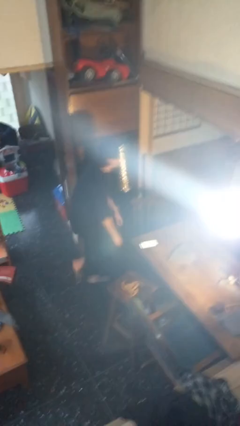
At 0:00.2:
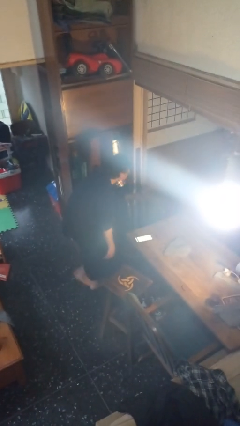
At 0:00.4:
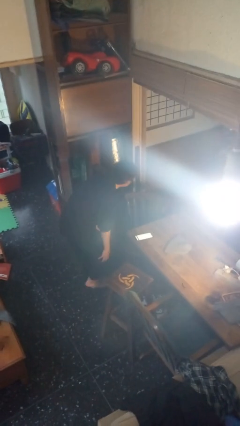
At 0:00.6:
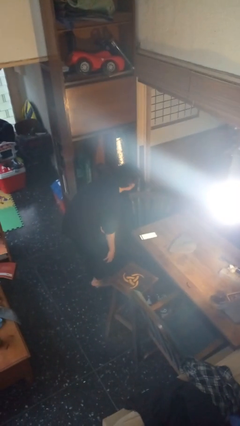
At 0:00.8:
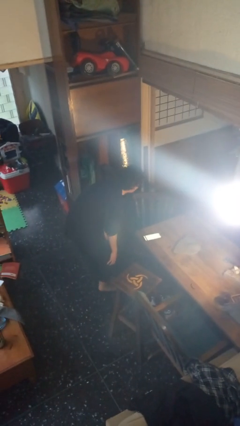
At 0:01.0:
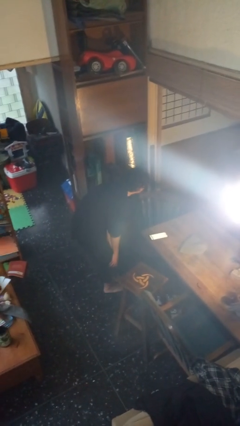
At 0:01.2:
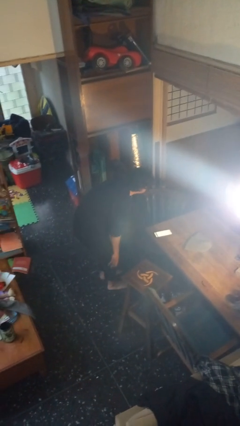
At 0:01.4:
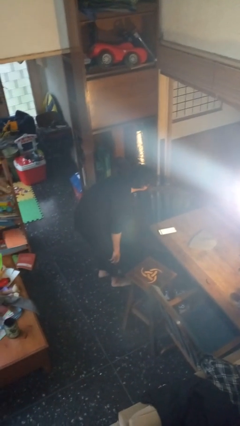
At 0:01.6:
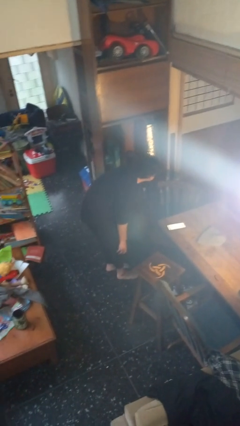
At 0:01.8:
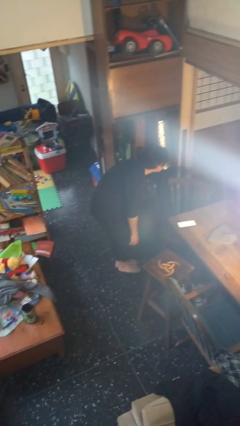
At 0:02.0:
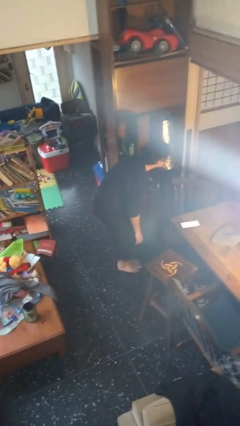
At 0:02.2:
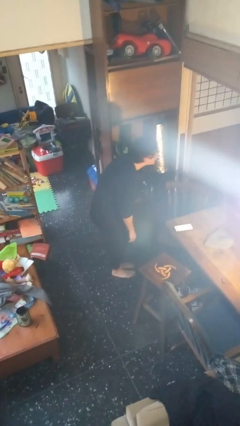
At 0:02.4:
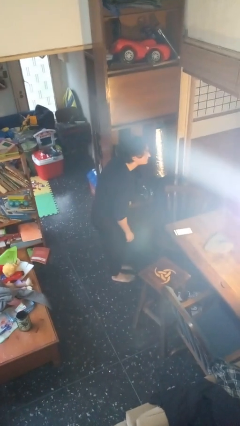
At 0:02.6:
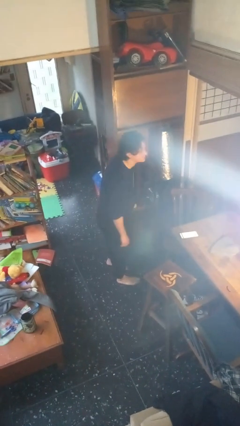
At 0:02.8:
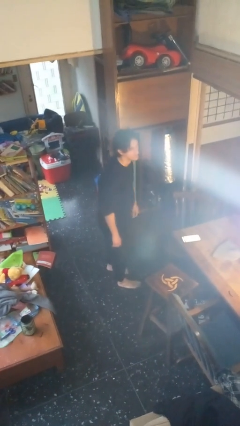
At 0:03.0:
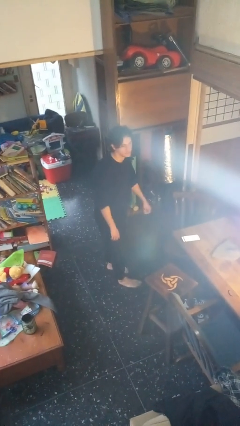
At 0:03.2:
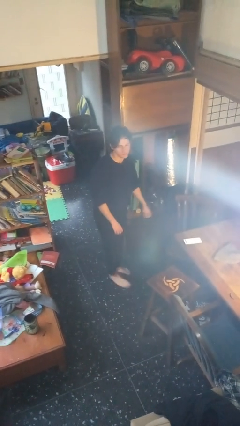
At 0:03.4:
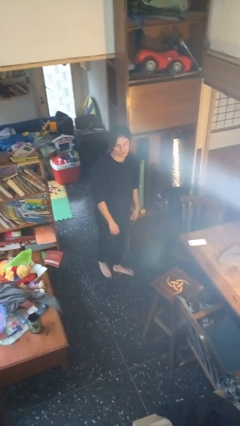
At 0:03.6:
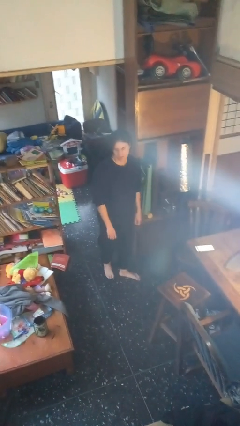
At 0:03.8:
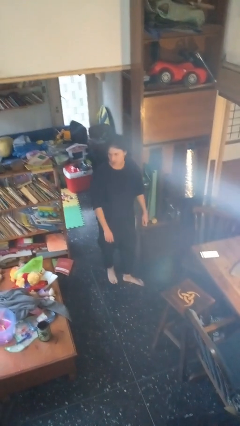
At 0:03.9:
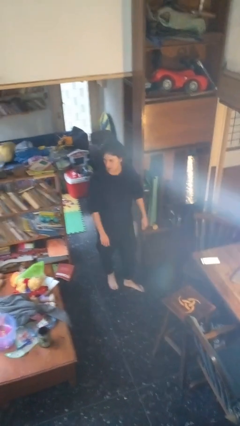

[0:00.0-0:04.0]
person stubs toe

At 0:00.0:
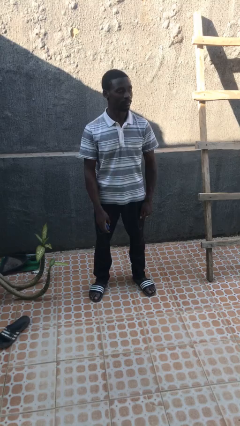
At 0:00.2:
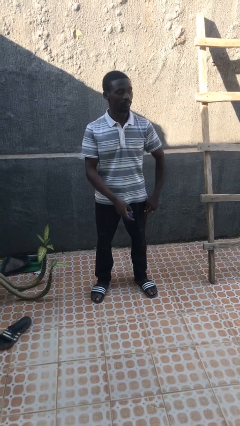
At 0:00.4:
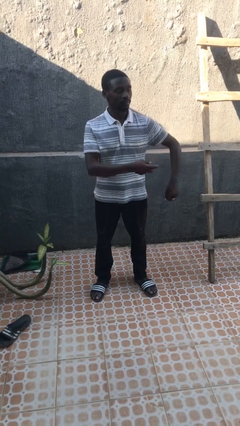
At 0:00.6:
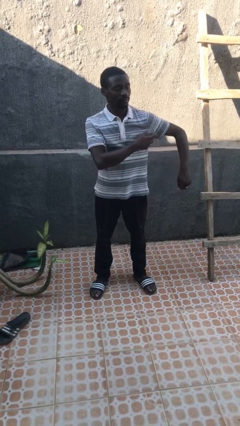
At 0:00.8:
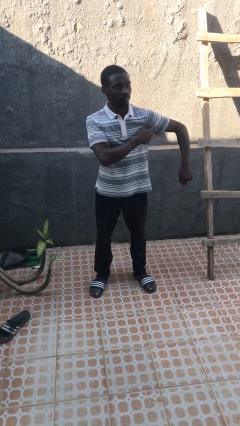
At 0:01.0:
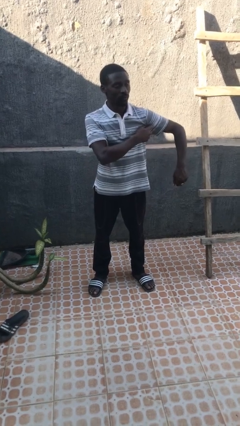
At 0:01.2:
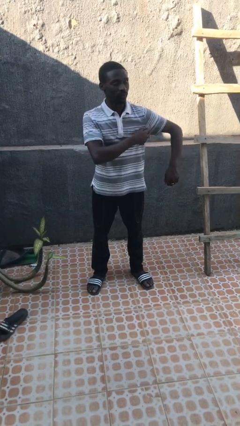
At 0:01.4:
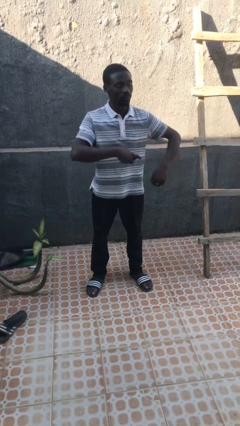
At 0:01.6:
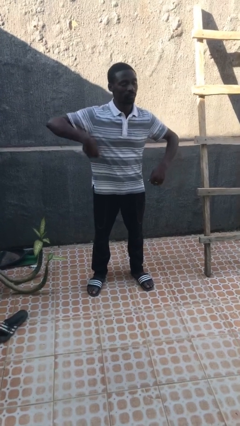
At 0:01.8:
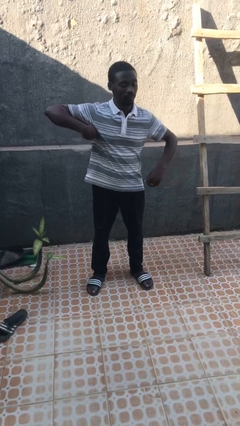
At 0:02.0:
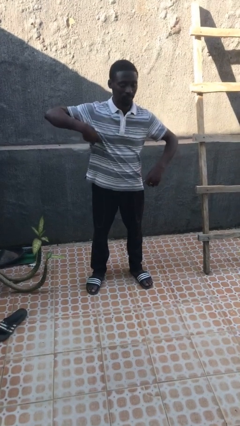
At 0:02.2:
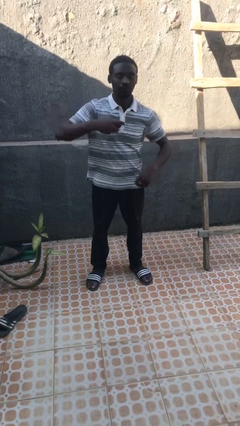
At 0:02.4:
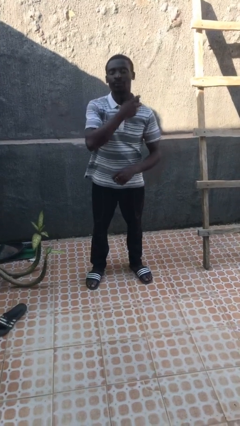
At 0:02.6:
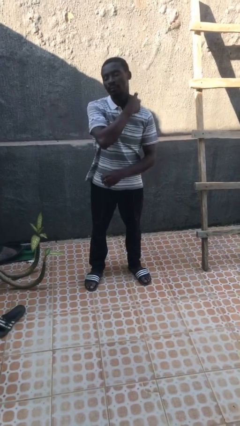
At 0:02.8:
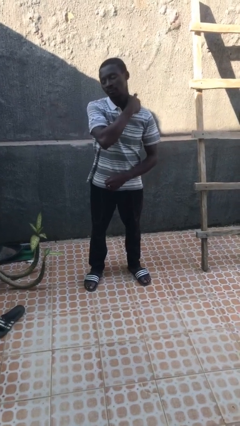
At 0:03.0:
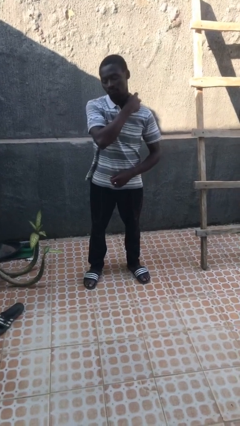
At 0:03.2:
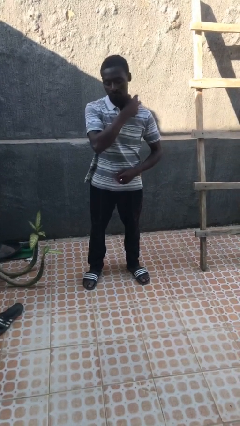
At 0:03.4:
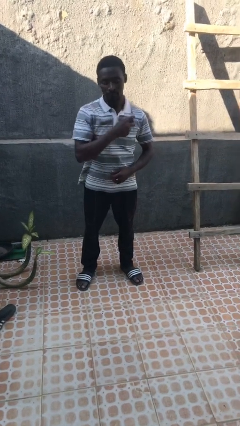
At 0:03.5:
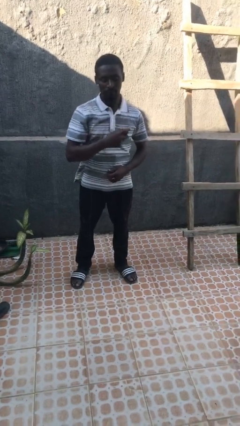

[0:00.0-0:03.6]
person applies deodorant

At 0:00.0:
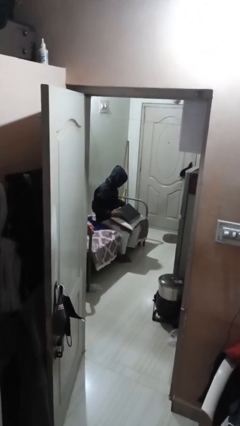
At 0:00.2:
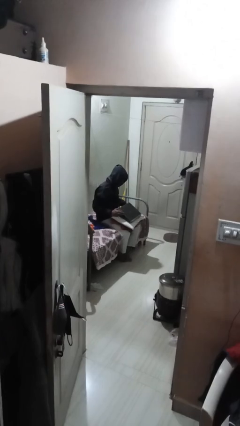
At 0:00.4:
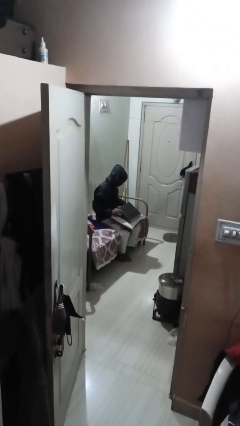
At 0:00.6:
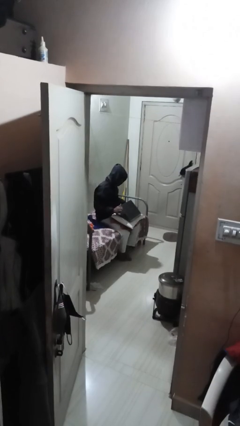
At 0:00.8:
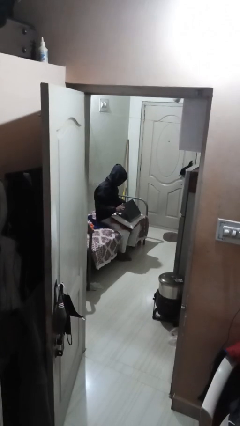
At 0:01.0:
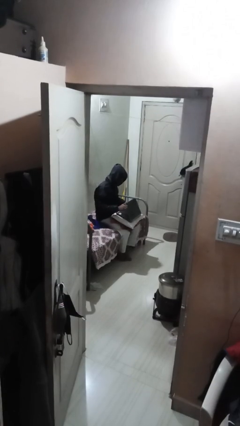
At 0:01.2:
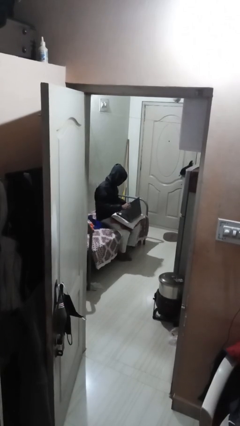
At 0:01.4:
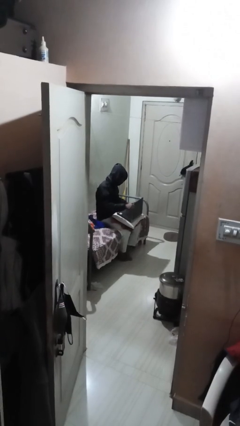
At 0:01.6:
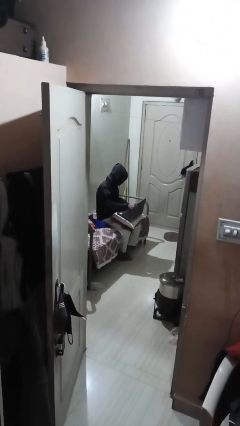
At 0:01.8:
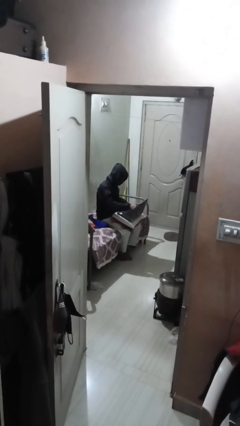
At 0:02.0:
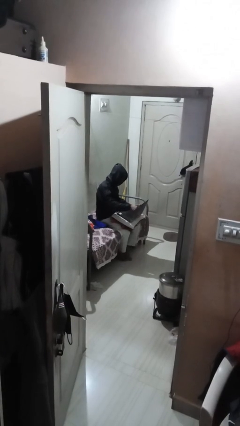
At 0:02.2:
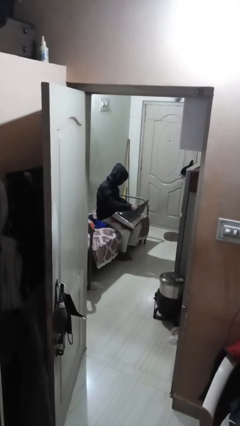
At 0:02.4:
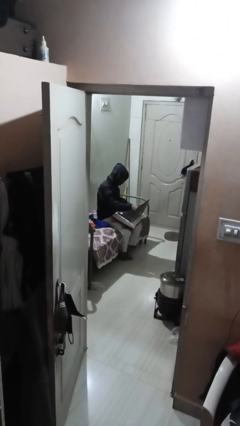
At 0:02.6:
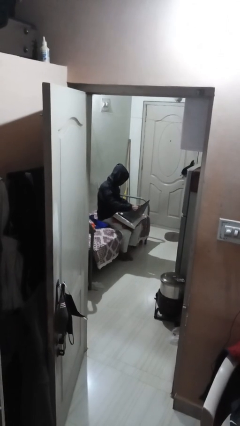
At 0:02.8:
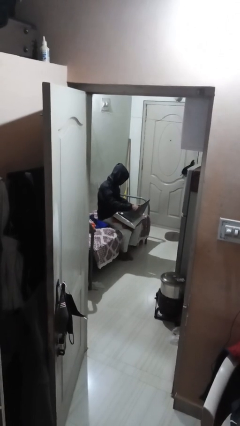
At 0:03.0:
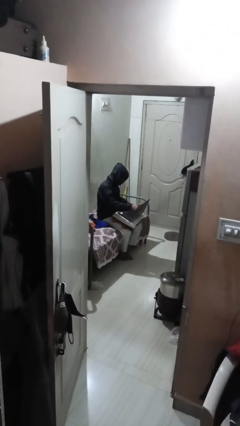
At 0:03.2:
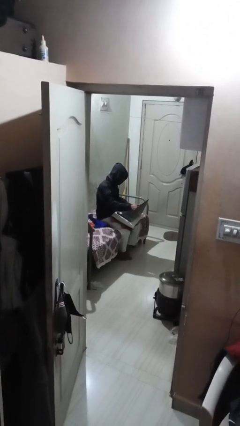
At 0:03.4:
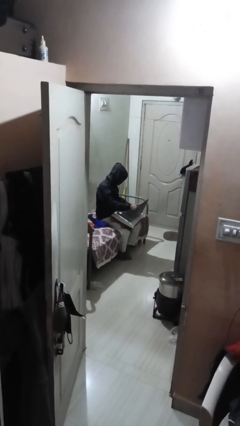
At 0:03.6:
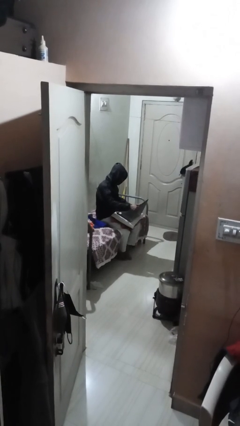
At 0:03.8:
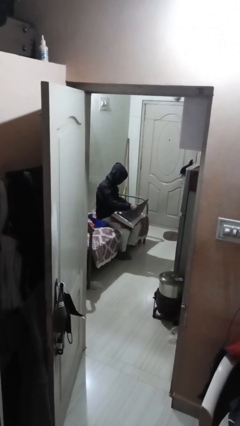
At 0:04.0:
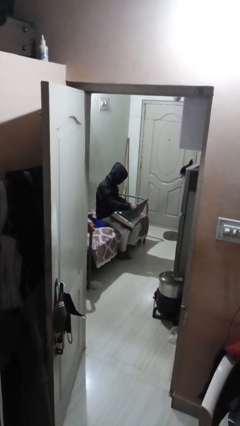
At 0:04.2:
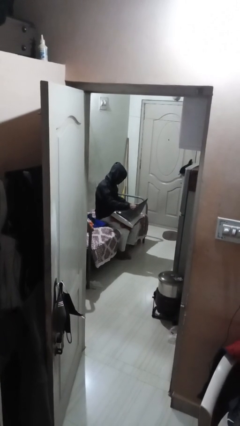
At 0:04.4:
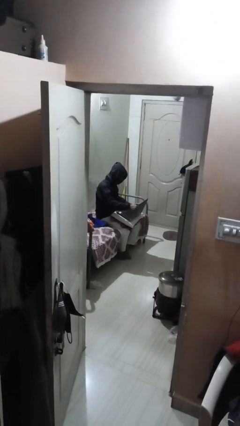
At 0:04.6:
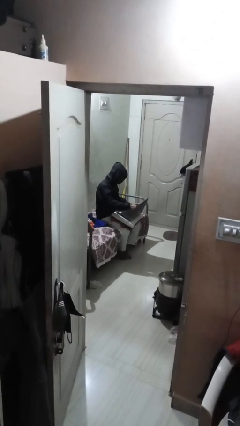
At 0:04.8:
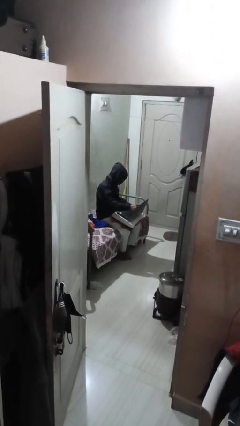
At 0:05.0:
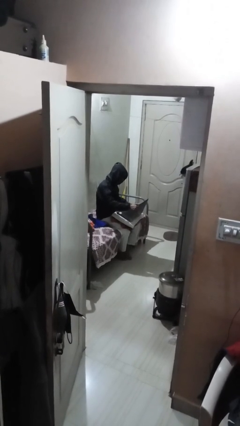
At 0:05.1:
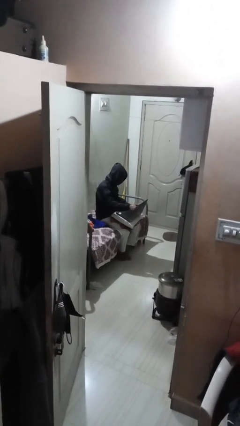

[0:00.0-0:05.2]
person interacts with laptop

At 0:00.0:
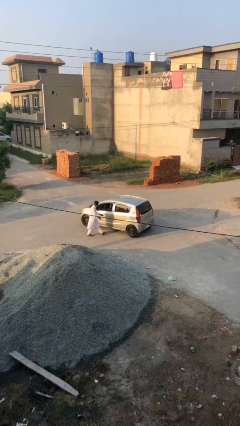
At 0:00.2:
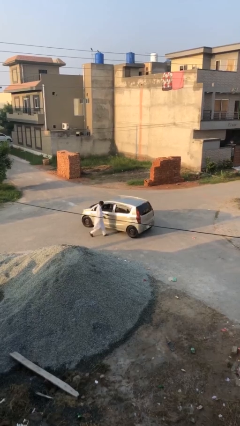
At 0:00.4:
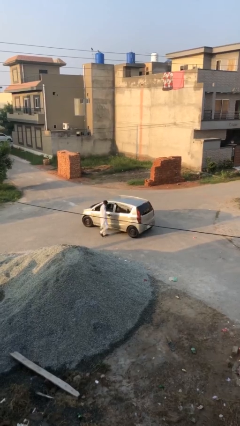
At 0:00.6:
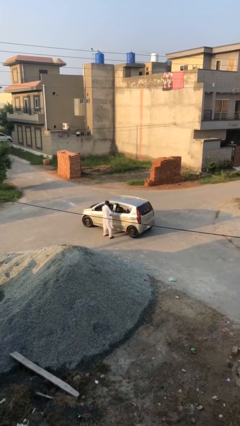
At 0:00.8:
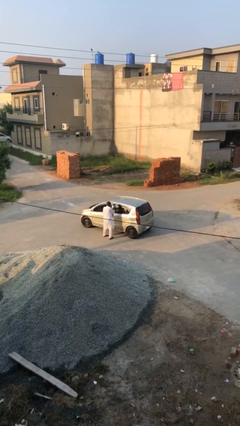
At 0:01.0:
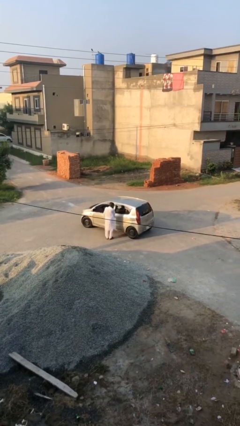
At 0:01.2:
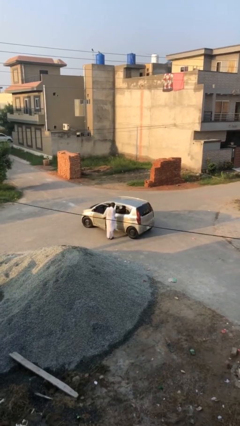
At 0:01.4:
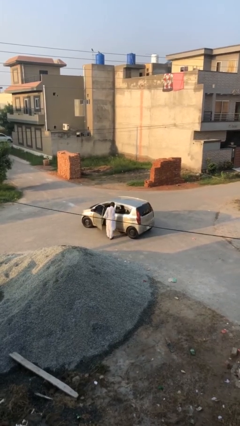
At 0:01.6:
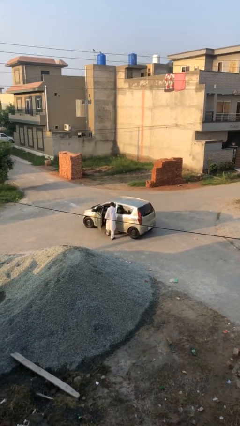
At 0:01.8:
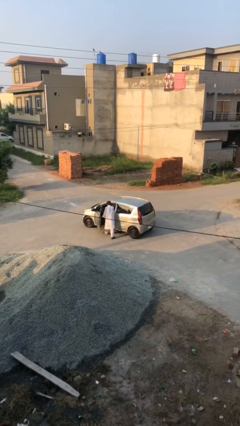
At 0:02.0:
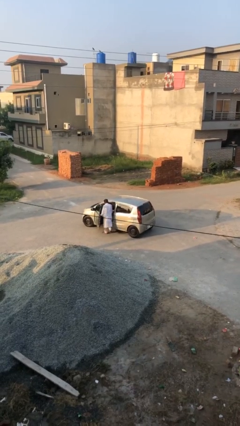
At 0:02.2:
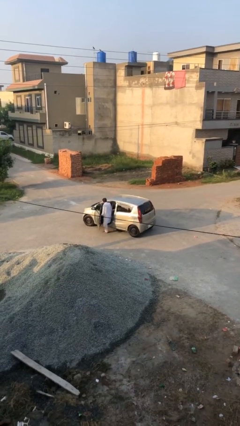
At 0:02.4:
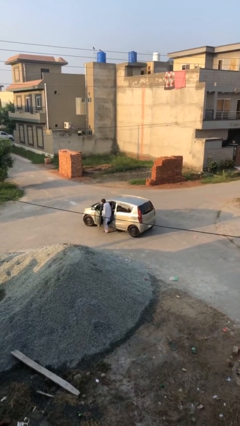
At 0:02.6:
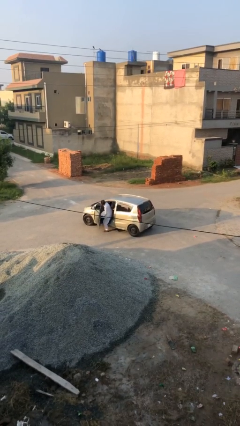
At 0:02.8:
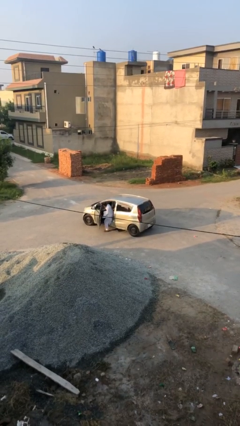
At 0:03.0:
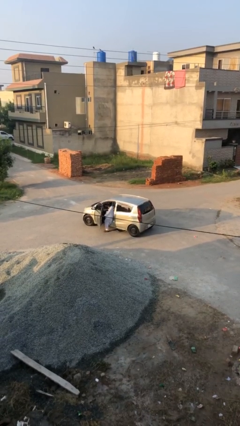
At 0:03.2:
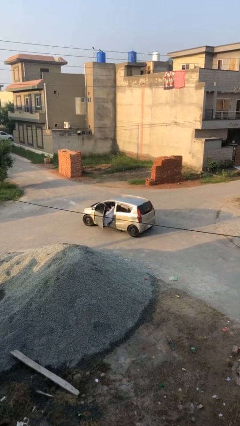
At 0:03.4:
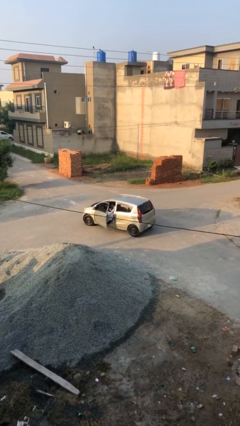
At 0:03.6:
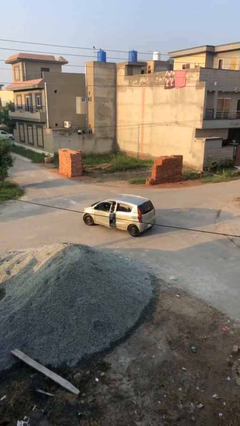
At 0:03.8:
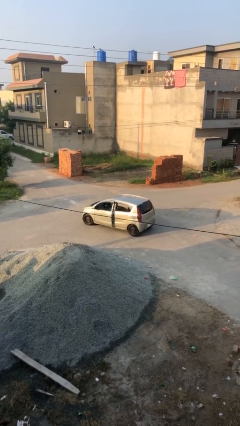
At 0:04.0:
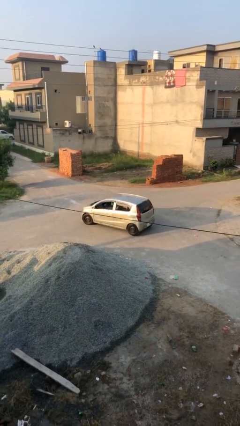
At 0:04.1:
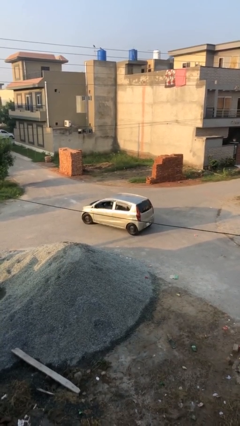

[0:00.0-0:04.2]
car picks up person

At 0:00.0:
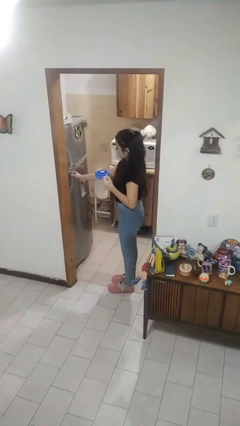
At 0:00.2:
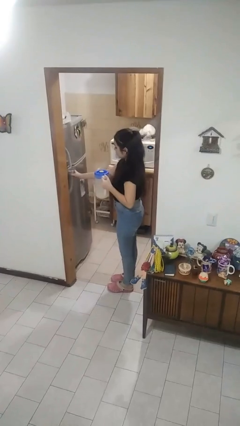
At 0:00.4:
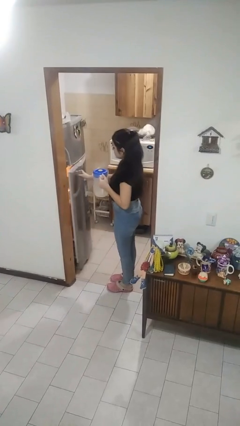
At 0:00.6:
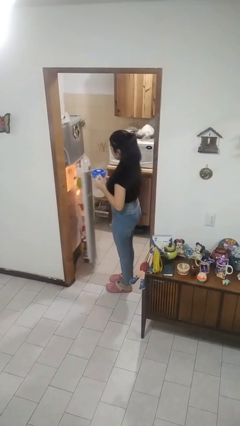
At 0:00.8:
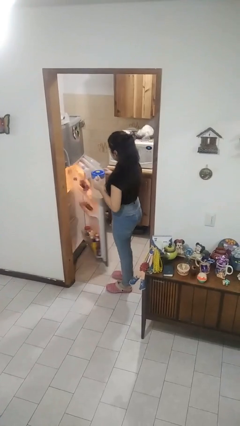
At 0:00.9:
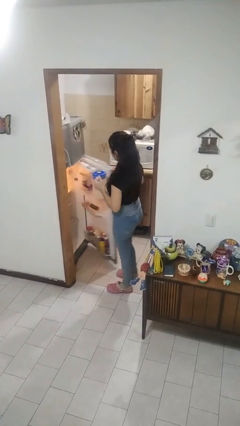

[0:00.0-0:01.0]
person opens refrigerator
